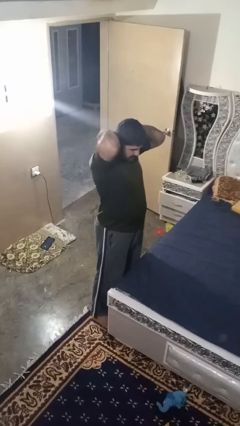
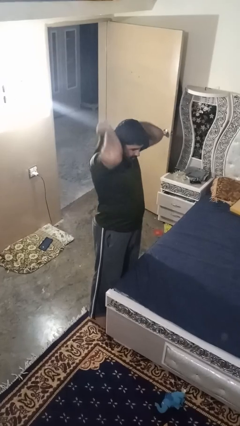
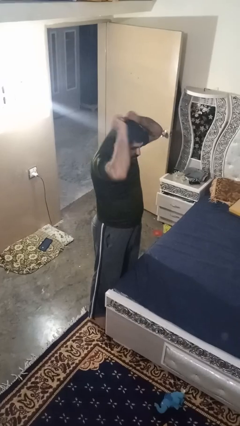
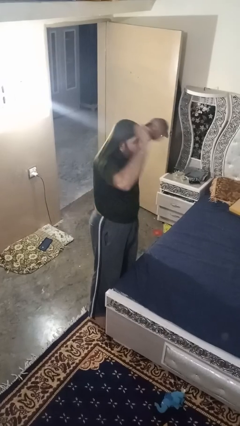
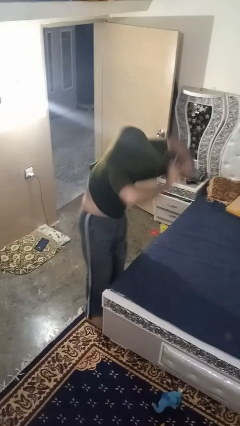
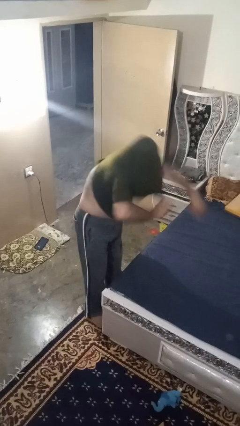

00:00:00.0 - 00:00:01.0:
person puts on shirt

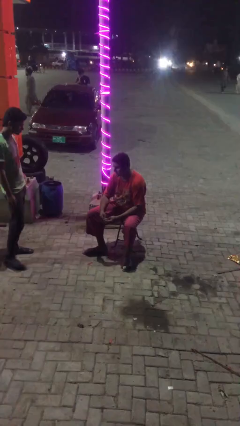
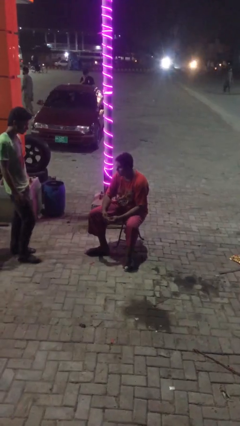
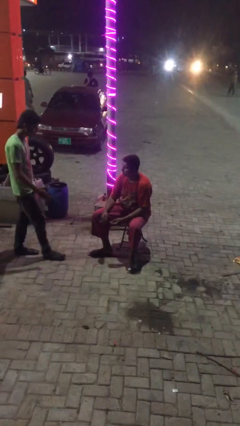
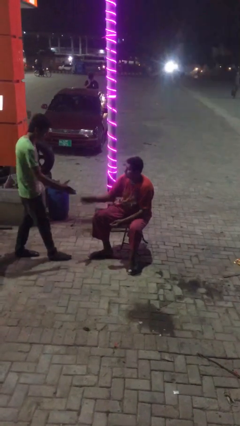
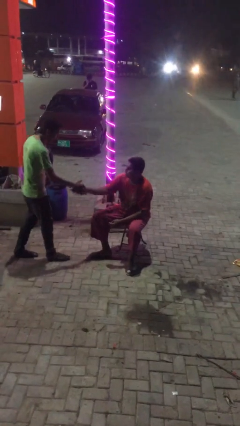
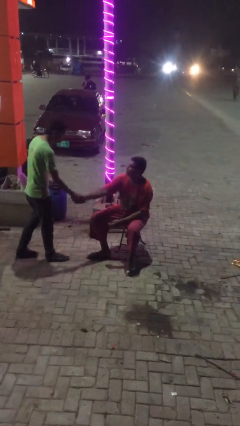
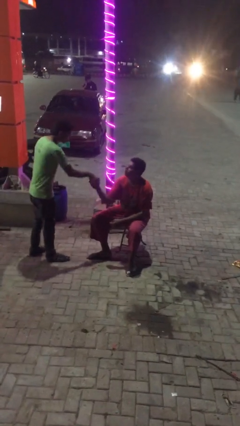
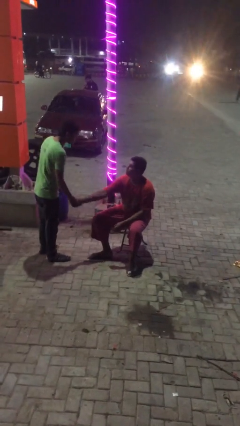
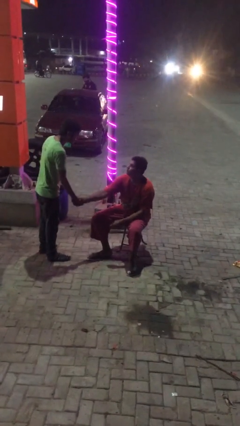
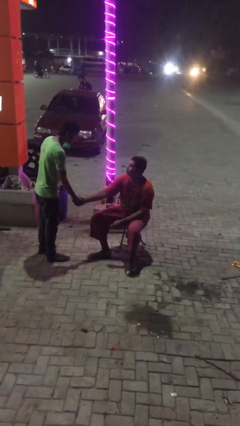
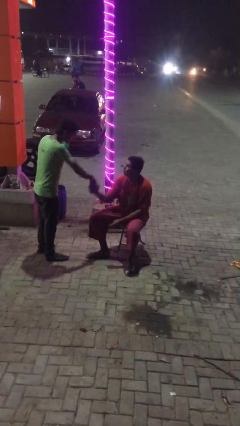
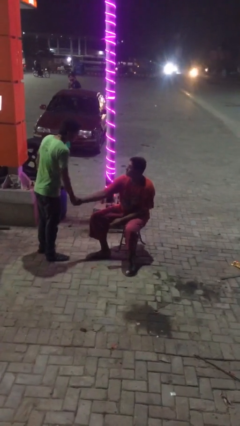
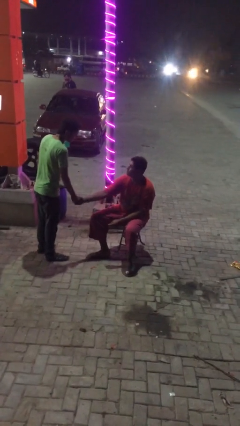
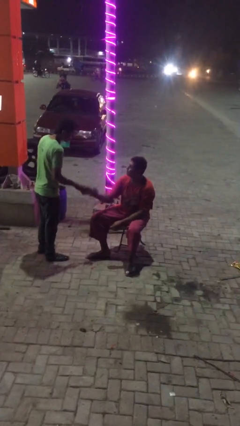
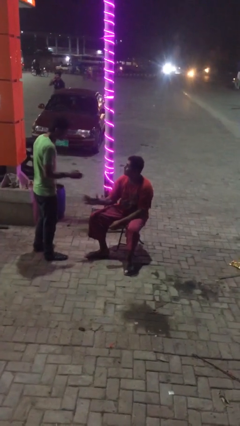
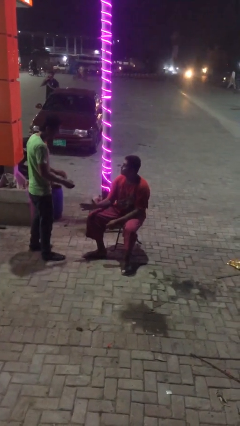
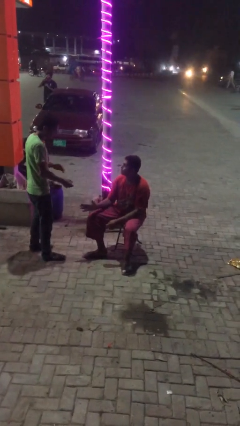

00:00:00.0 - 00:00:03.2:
person shakes hand

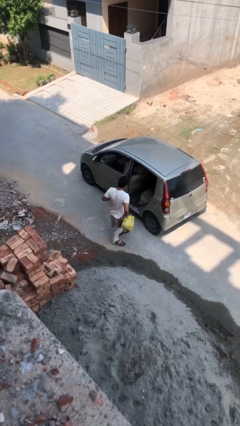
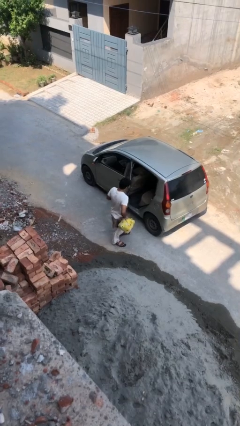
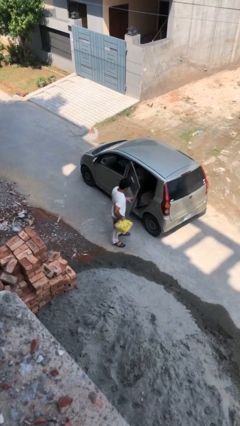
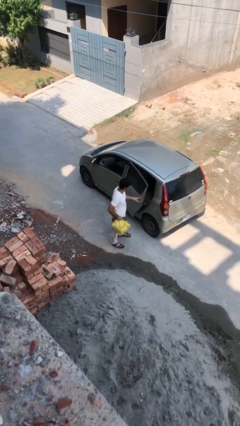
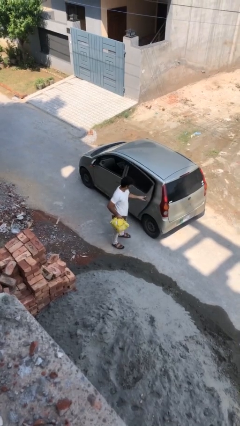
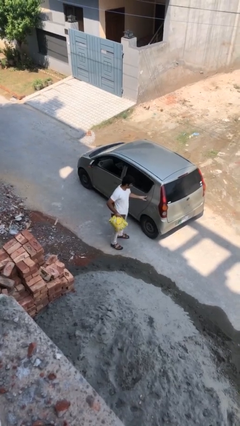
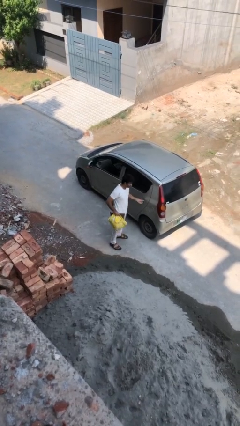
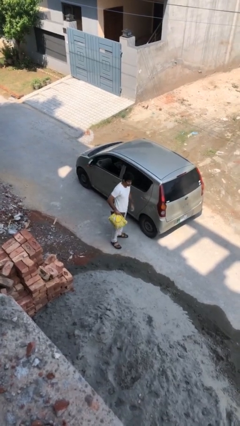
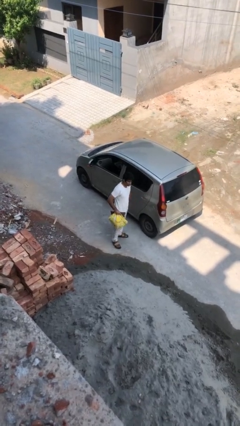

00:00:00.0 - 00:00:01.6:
person closes car door

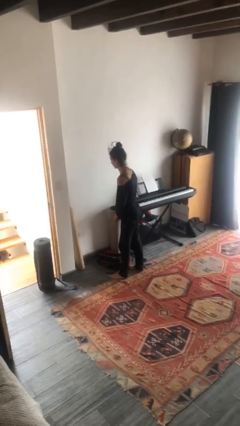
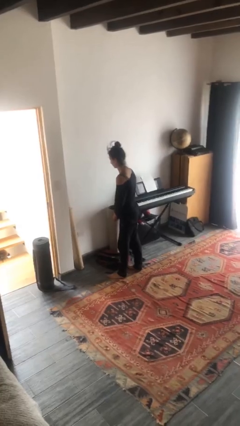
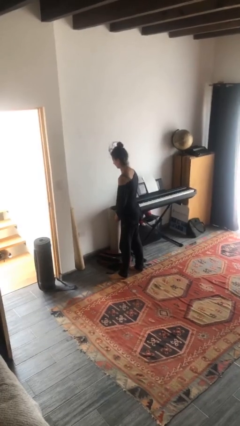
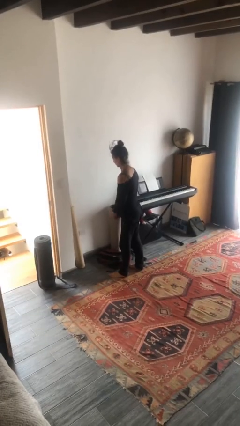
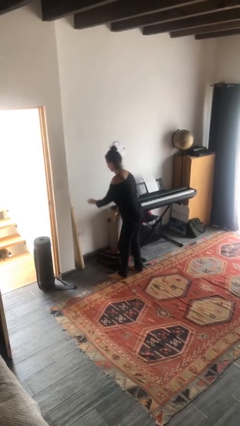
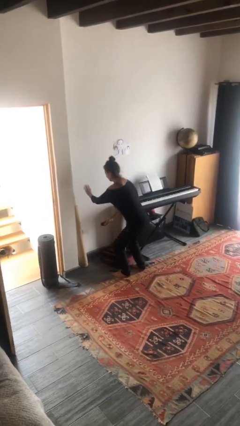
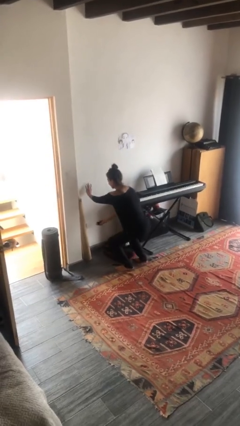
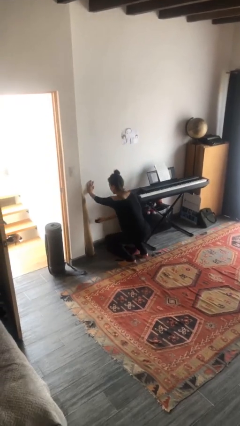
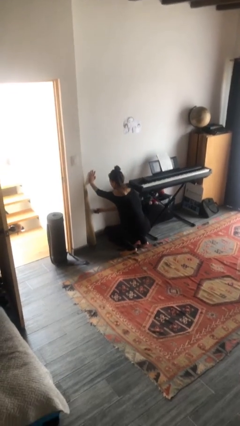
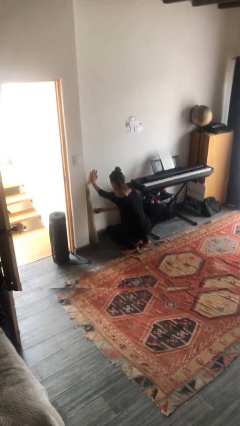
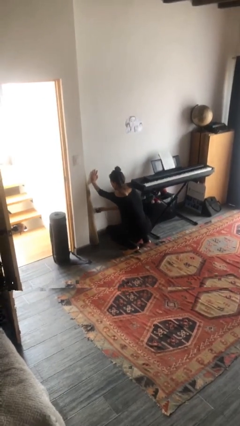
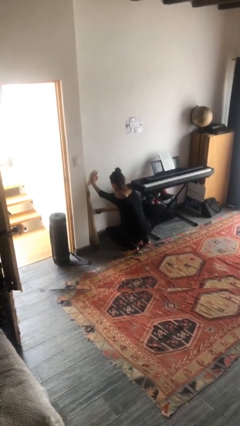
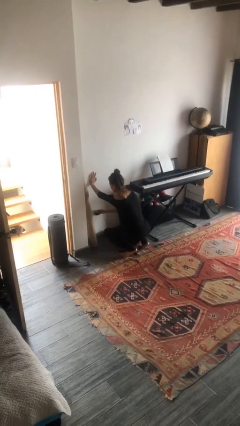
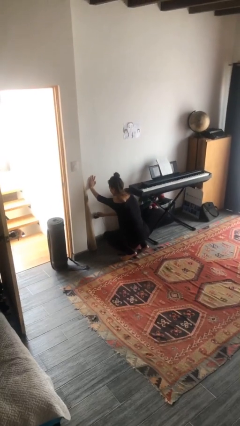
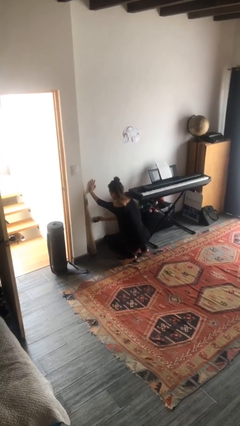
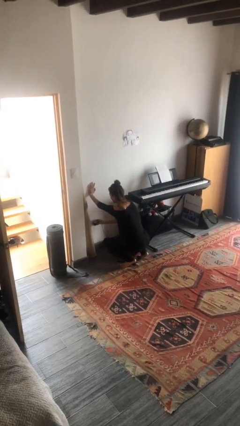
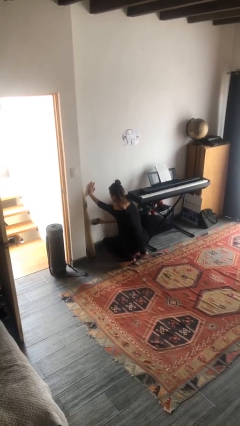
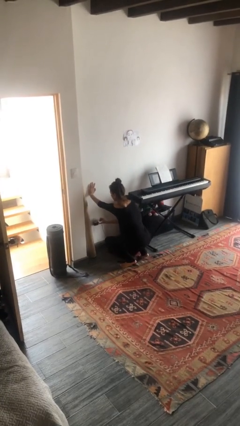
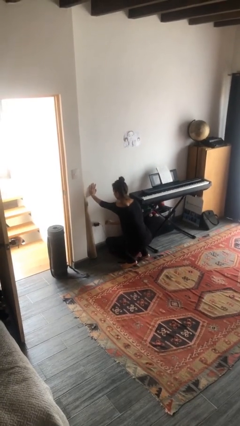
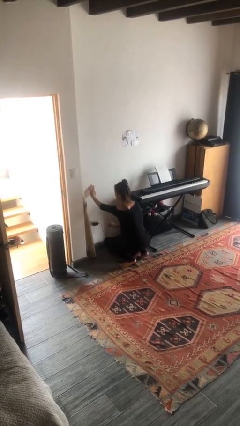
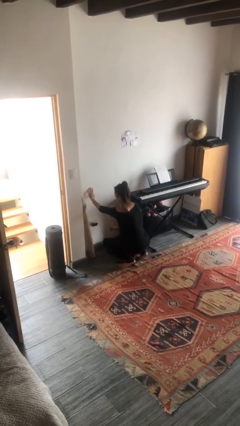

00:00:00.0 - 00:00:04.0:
person plugs into electrical socket

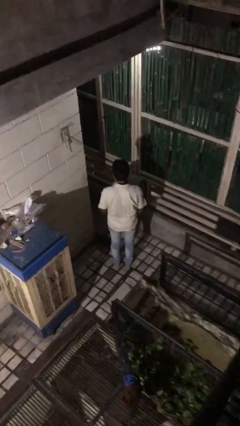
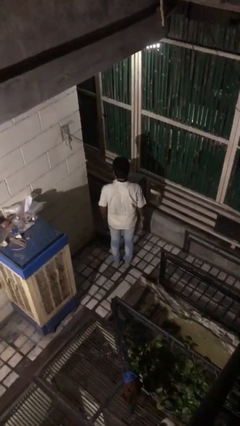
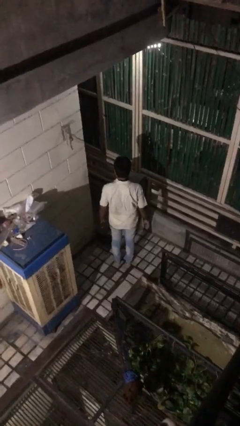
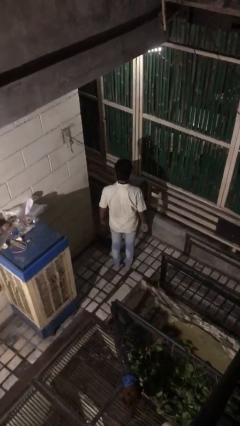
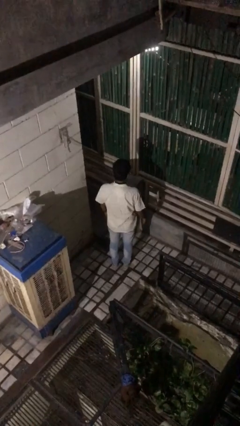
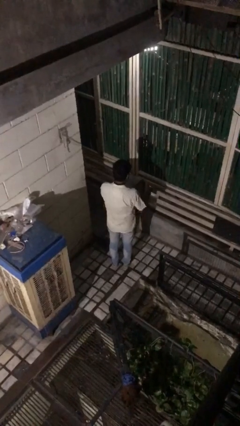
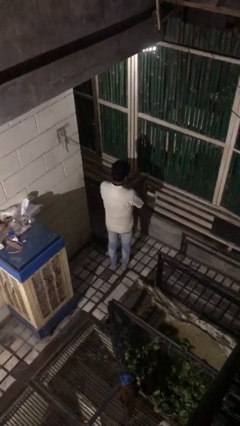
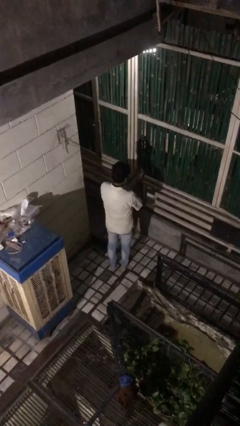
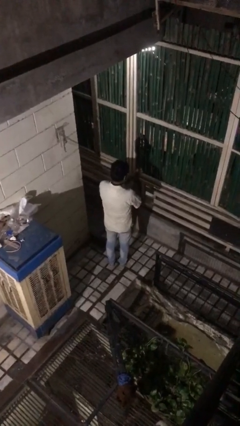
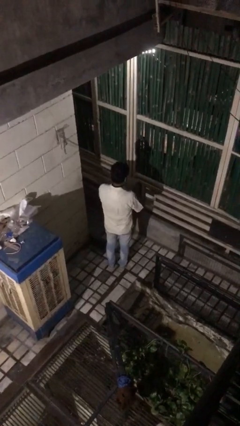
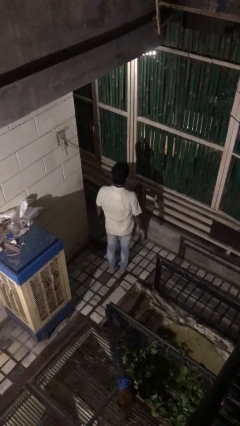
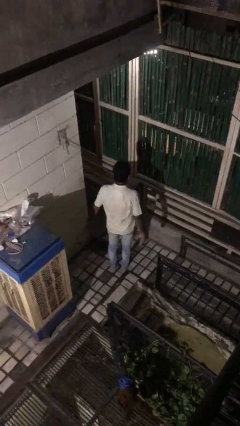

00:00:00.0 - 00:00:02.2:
person claps hands

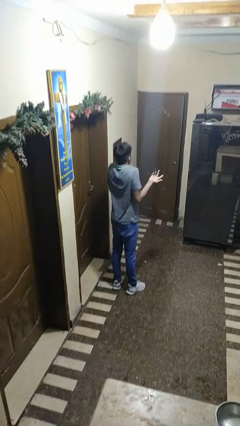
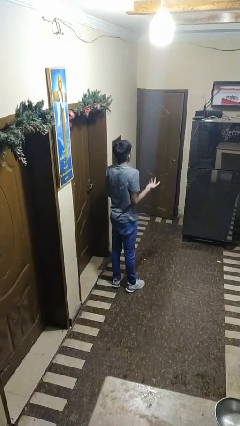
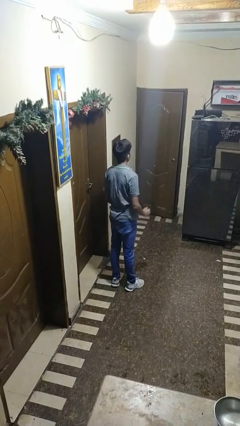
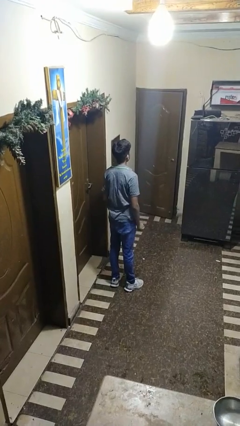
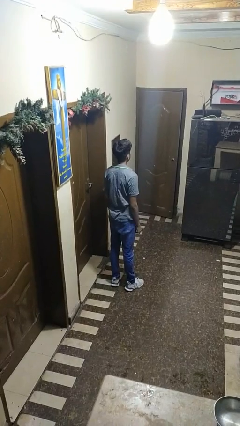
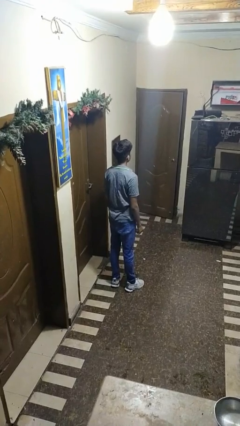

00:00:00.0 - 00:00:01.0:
person shrugs

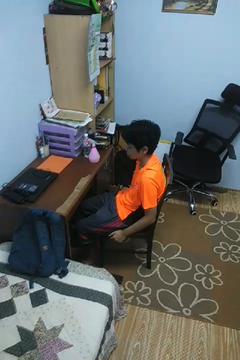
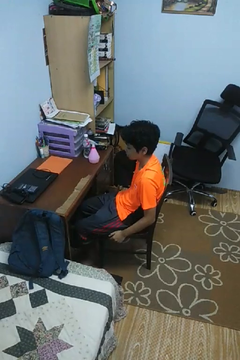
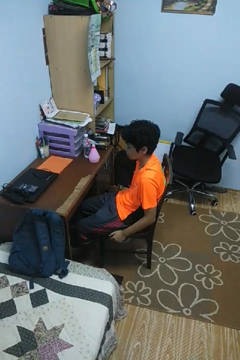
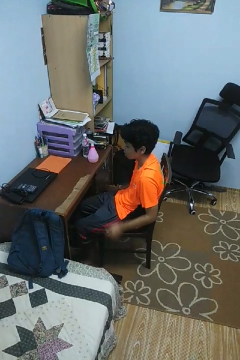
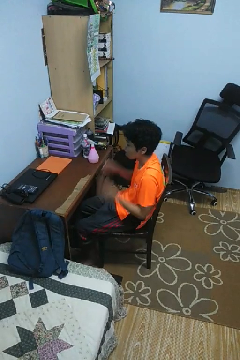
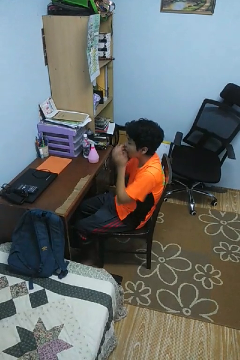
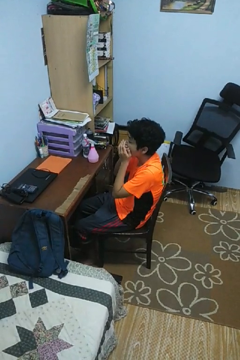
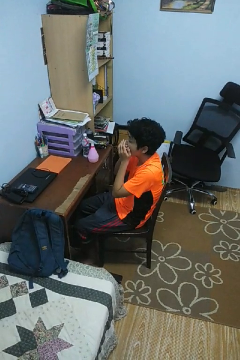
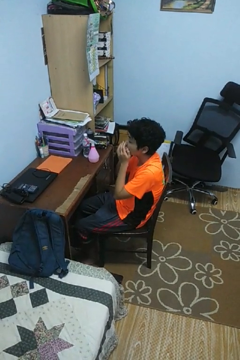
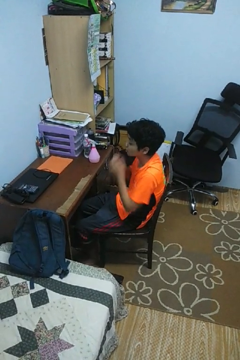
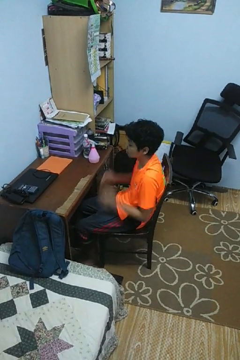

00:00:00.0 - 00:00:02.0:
person yawns

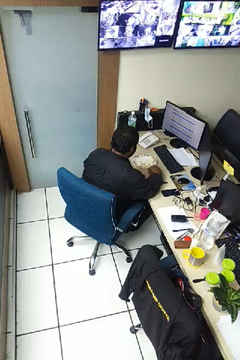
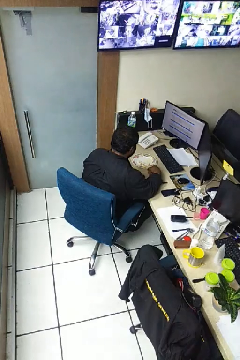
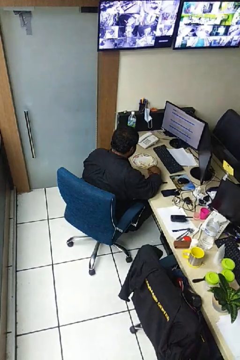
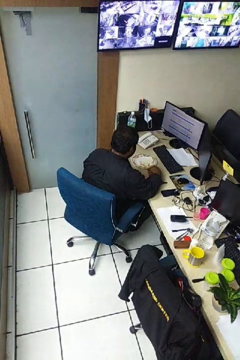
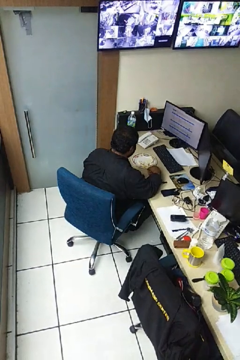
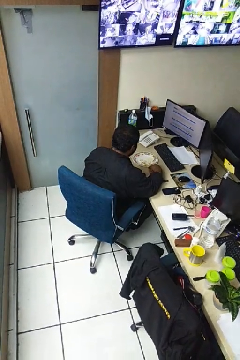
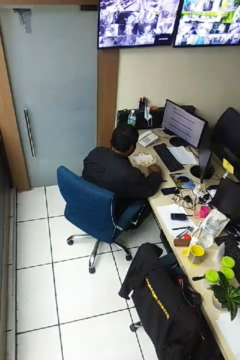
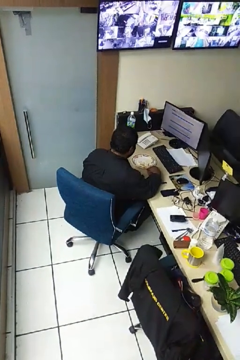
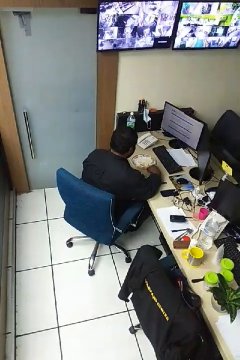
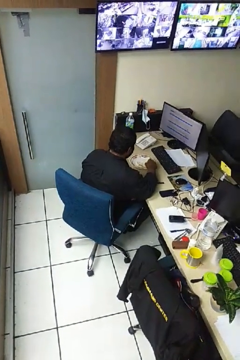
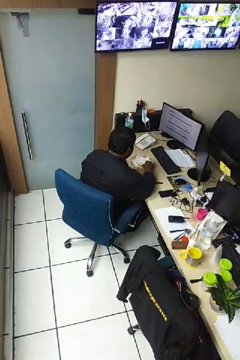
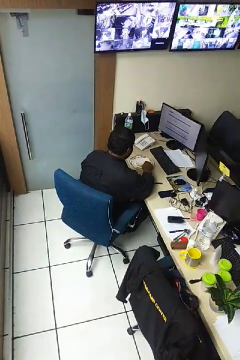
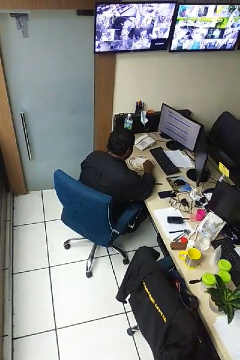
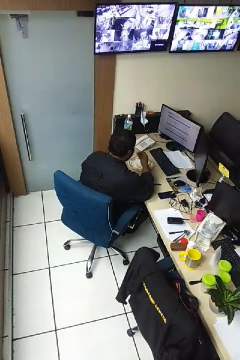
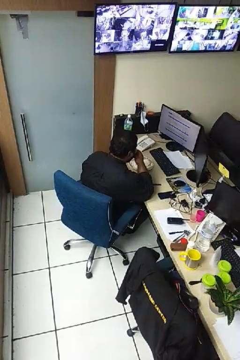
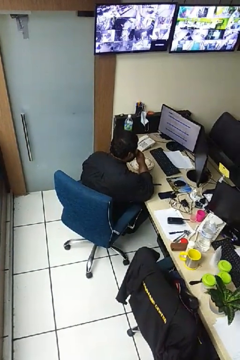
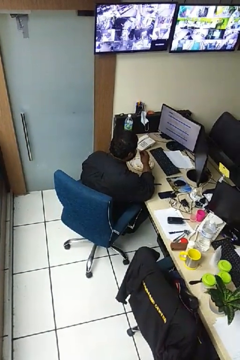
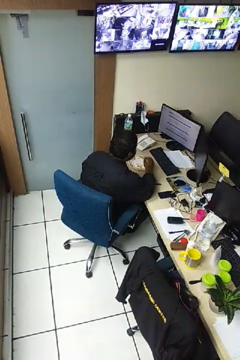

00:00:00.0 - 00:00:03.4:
person eats with hands
